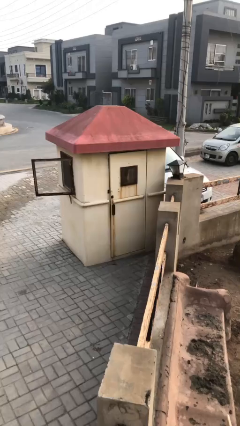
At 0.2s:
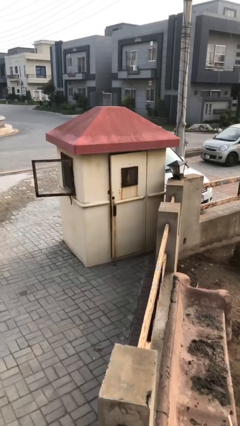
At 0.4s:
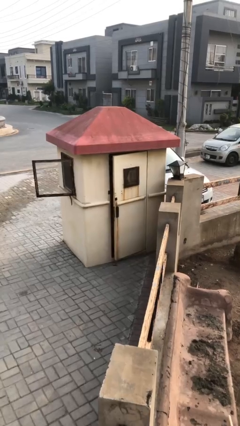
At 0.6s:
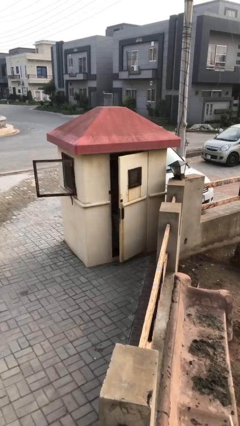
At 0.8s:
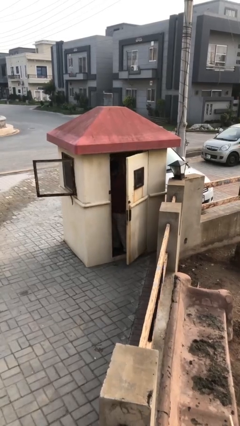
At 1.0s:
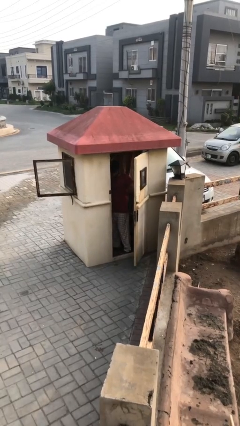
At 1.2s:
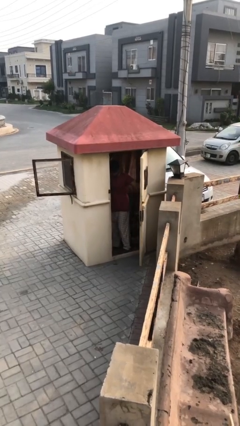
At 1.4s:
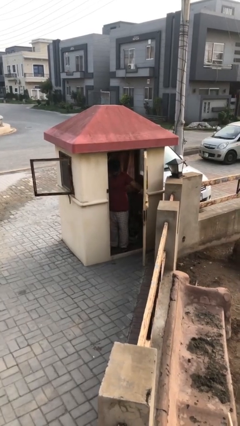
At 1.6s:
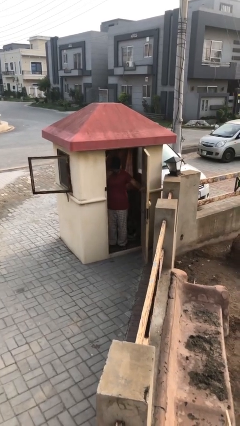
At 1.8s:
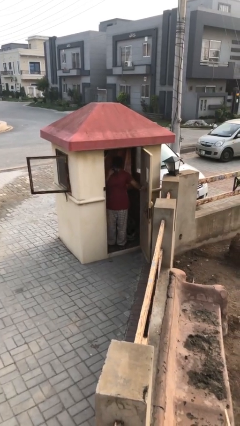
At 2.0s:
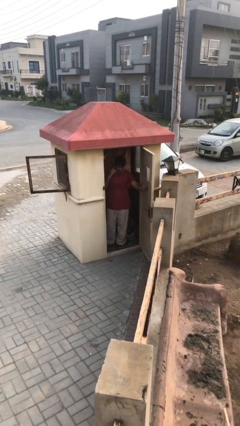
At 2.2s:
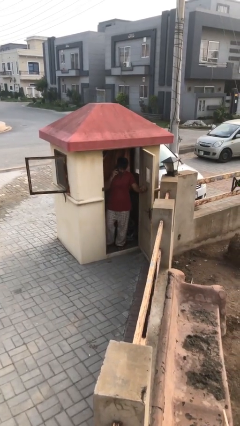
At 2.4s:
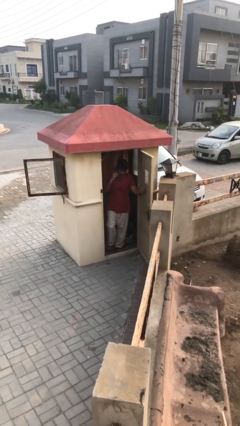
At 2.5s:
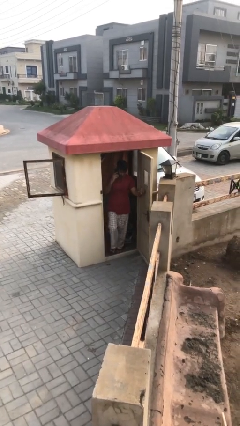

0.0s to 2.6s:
person opens facility door

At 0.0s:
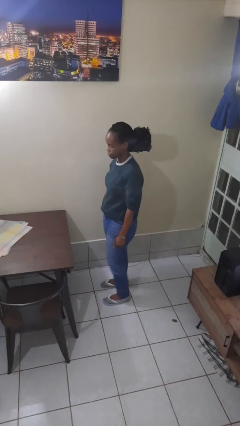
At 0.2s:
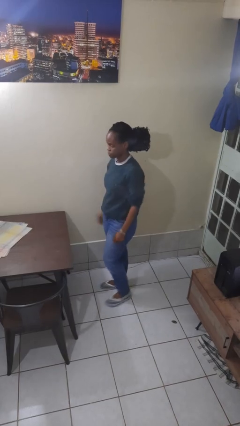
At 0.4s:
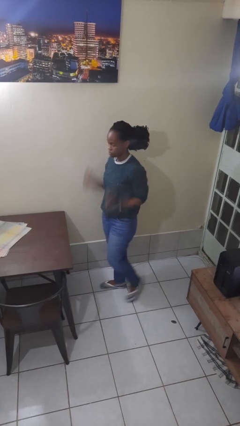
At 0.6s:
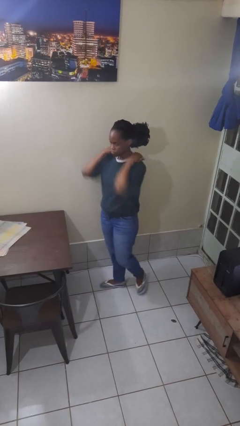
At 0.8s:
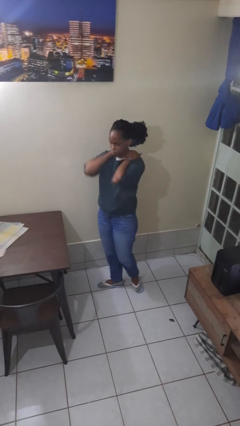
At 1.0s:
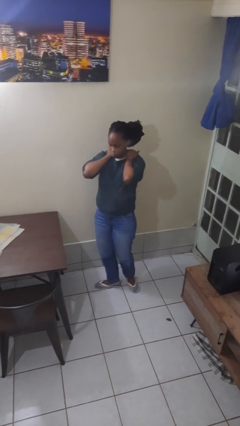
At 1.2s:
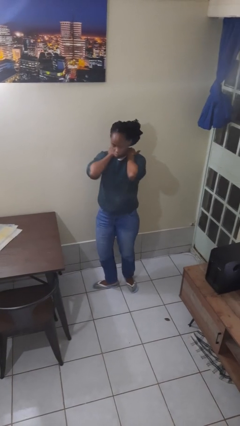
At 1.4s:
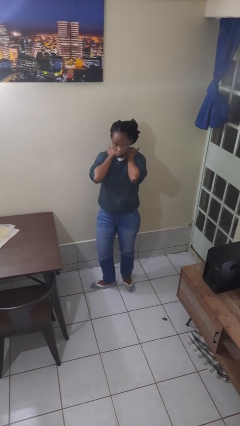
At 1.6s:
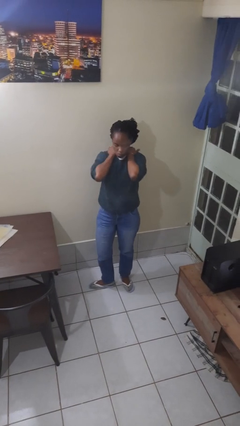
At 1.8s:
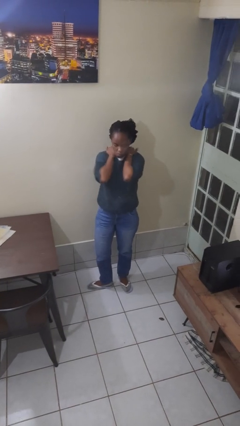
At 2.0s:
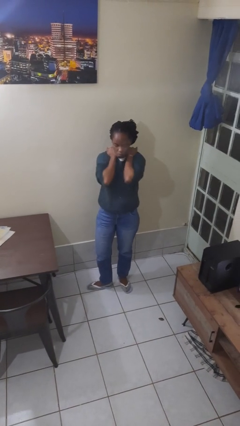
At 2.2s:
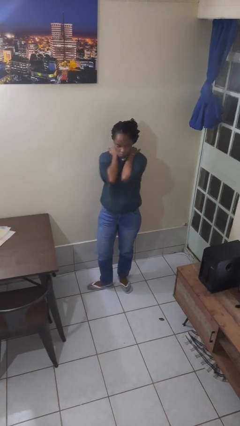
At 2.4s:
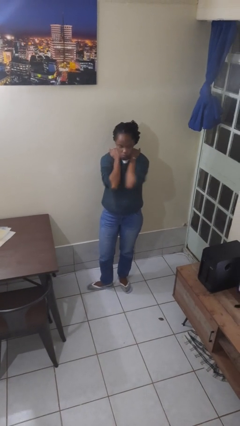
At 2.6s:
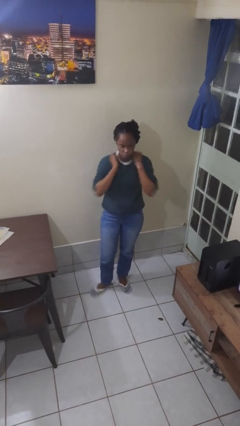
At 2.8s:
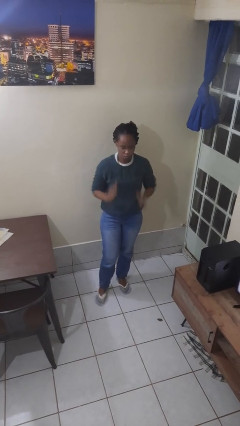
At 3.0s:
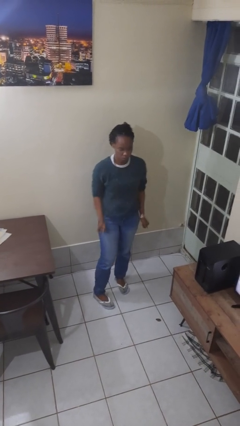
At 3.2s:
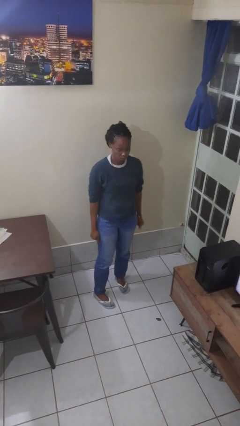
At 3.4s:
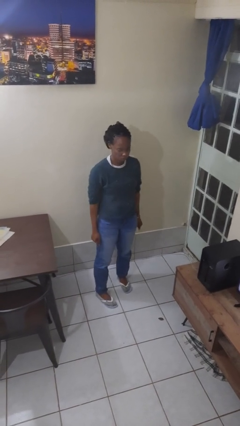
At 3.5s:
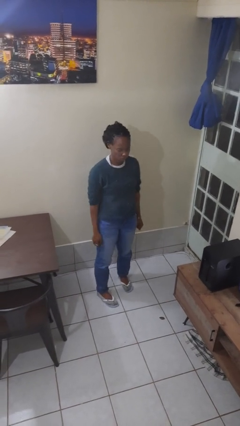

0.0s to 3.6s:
person rubs neck

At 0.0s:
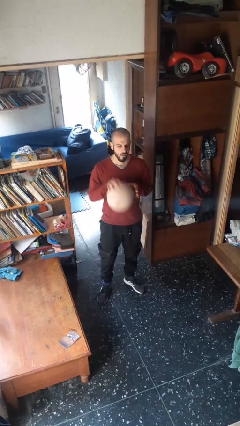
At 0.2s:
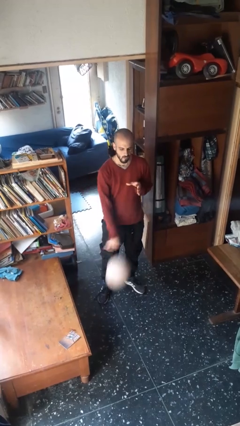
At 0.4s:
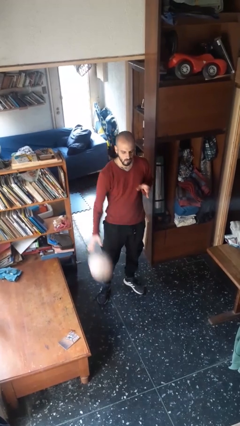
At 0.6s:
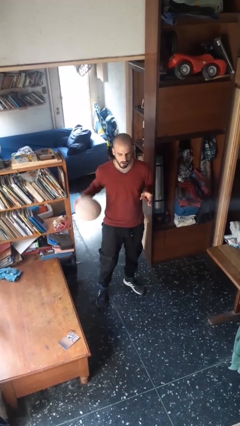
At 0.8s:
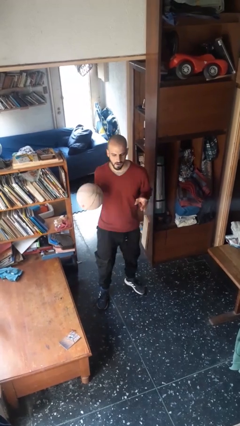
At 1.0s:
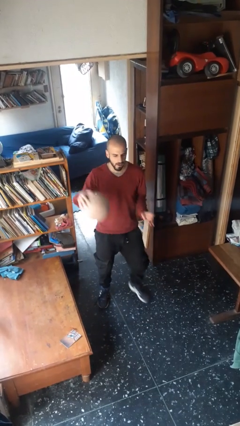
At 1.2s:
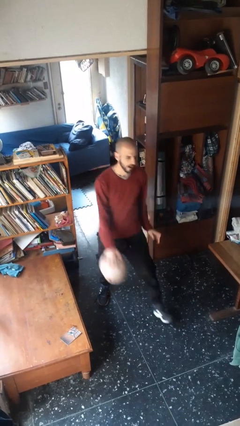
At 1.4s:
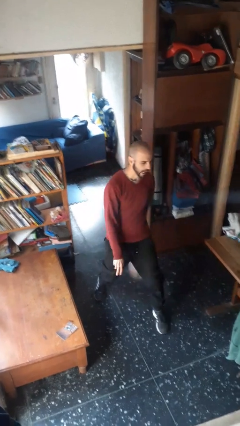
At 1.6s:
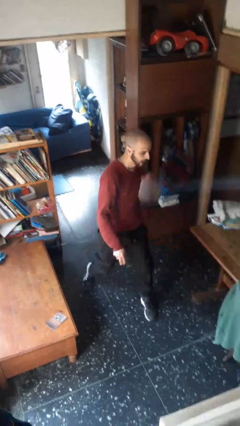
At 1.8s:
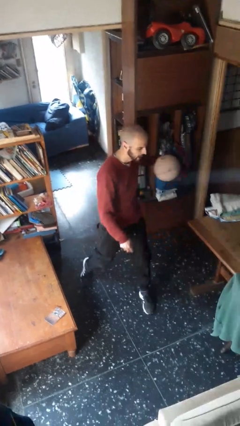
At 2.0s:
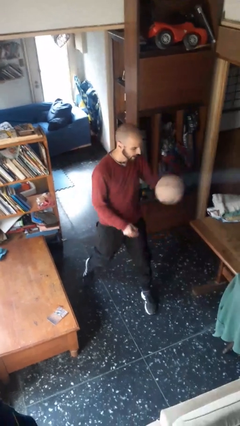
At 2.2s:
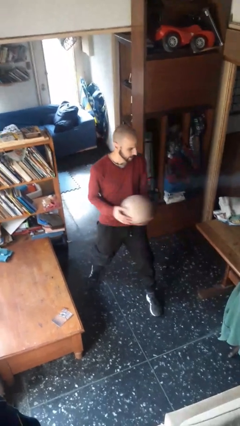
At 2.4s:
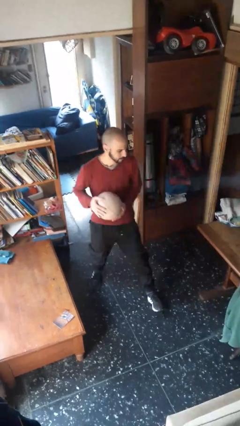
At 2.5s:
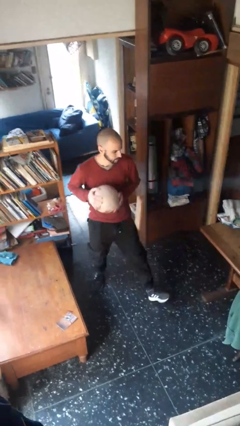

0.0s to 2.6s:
person bounces ball on floor

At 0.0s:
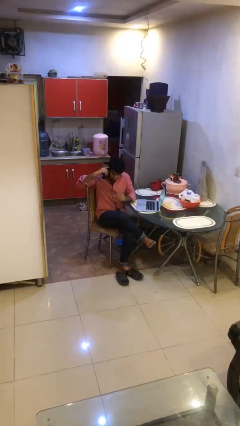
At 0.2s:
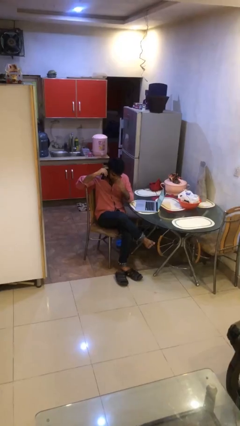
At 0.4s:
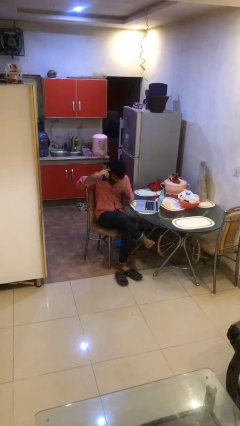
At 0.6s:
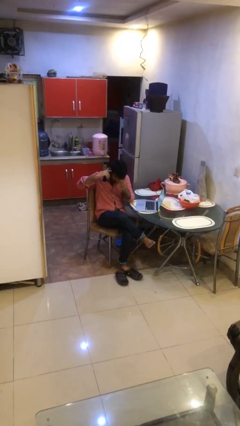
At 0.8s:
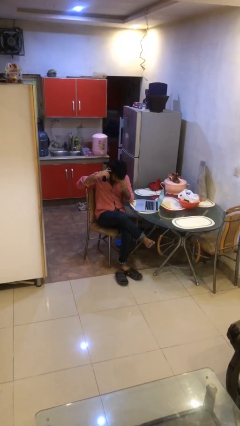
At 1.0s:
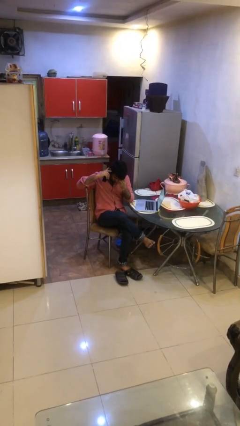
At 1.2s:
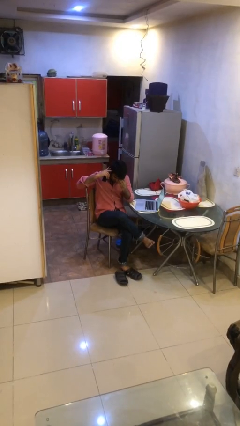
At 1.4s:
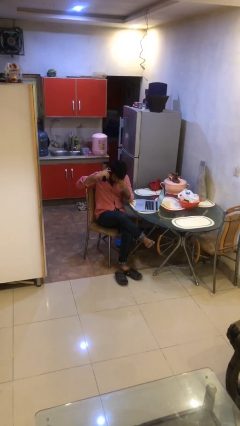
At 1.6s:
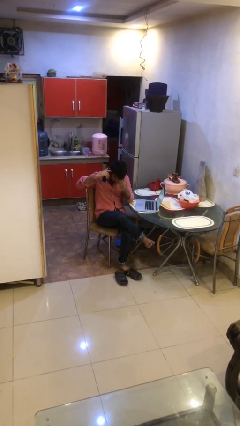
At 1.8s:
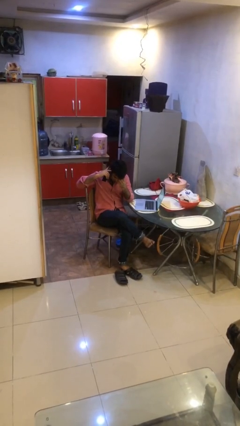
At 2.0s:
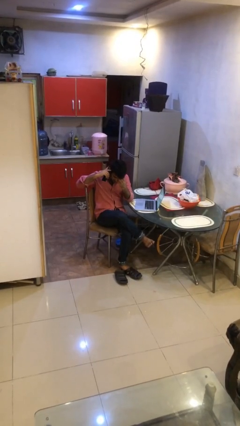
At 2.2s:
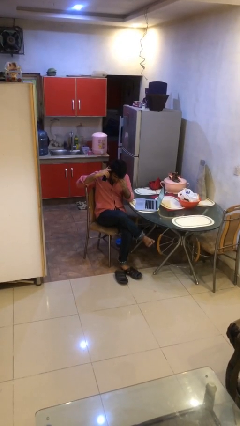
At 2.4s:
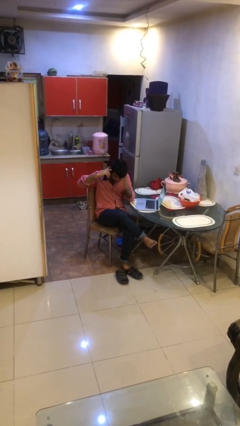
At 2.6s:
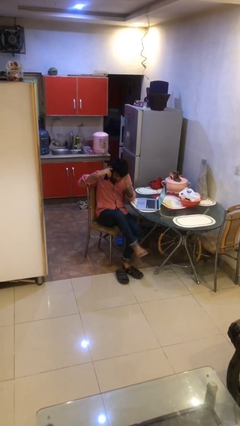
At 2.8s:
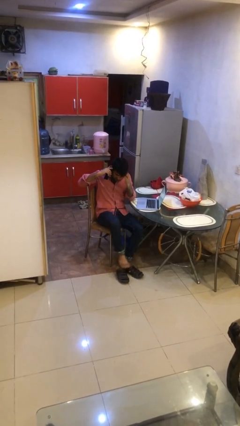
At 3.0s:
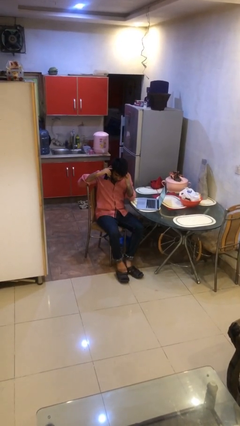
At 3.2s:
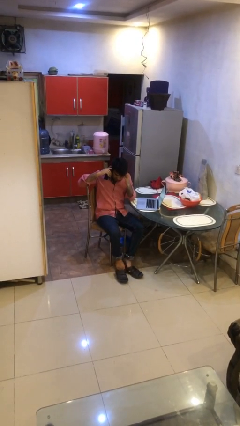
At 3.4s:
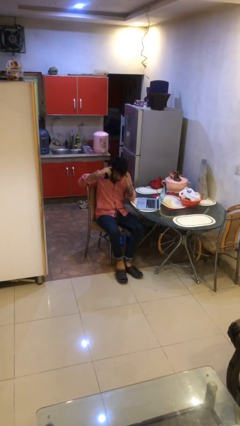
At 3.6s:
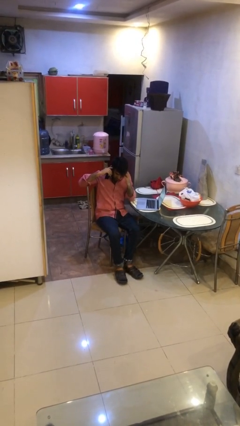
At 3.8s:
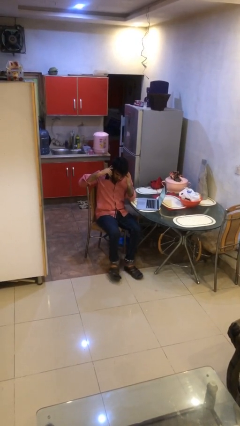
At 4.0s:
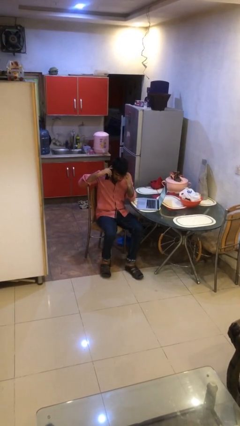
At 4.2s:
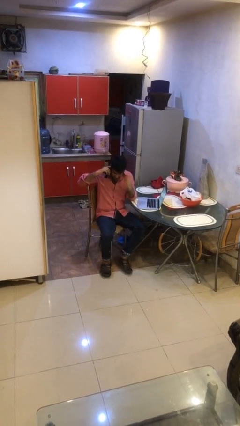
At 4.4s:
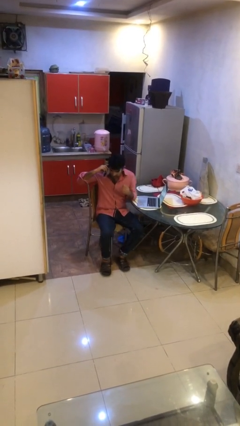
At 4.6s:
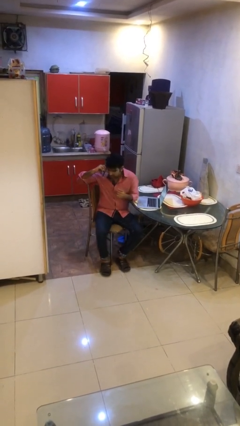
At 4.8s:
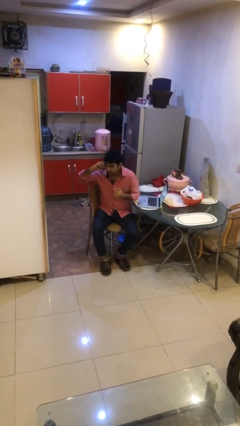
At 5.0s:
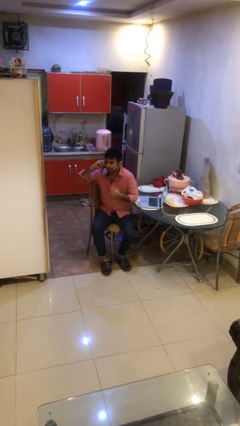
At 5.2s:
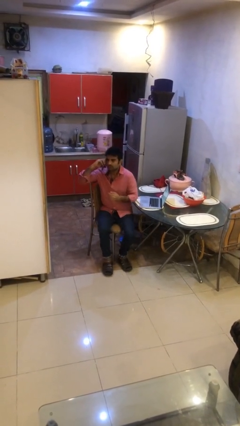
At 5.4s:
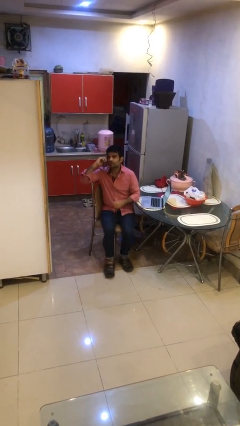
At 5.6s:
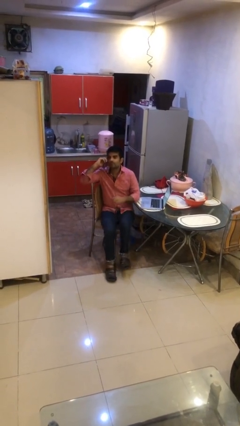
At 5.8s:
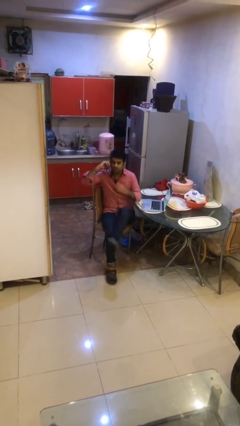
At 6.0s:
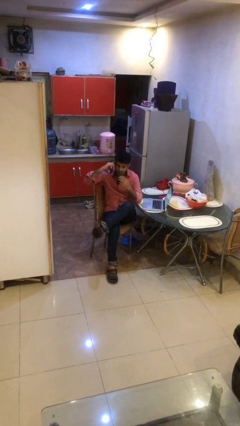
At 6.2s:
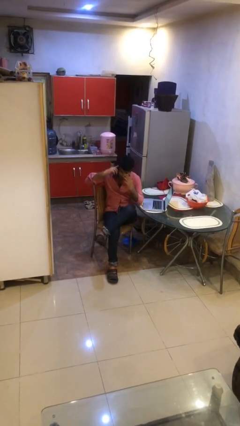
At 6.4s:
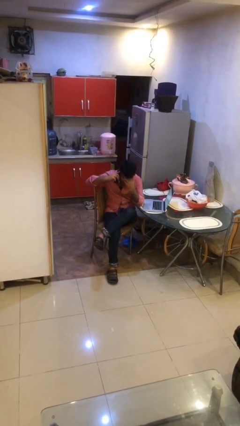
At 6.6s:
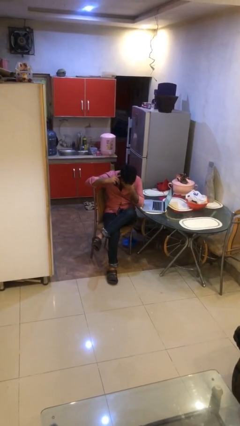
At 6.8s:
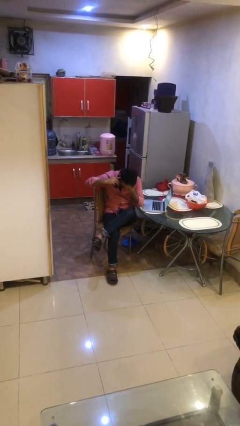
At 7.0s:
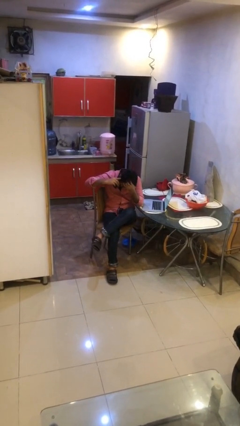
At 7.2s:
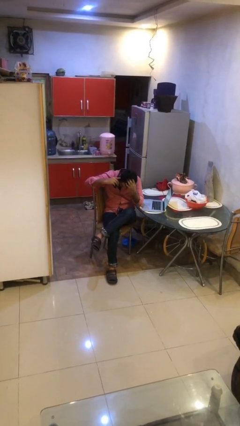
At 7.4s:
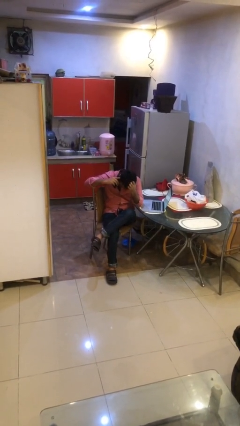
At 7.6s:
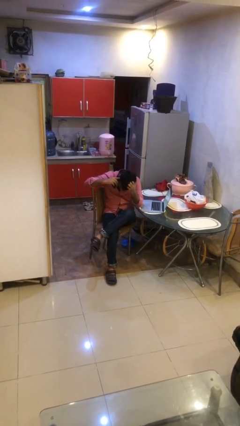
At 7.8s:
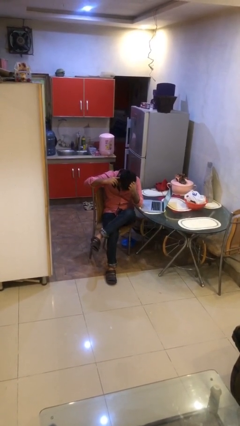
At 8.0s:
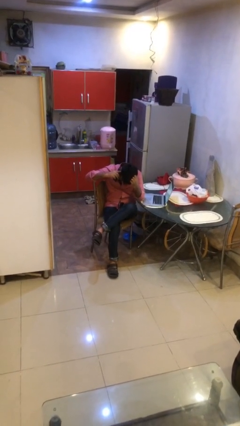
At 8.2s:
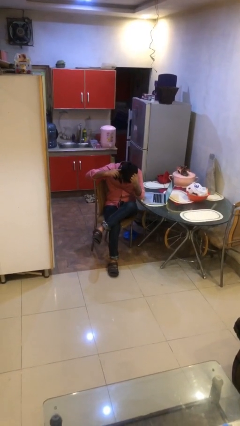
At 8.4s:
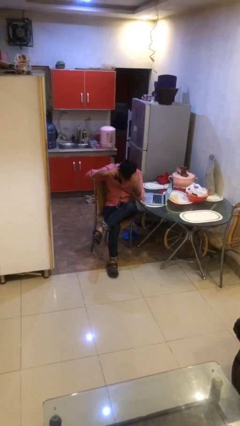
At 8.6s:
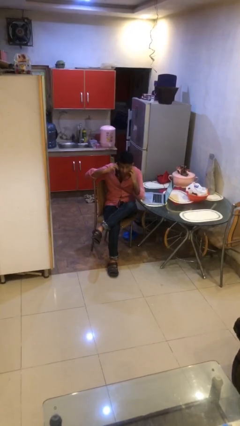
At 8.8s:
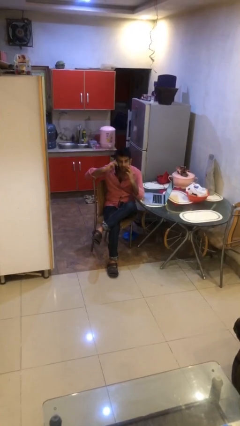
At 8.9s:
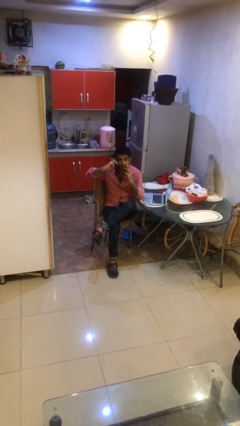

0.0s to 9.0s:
person talks on phone
